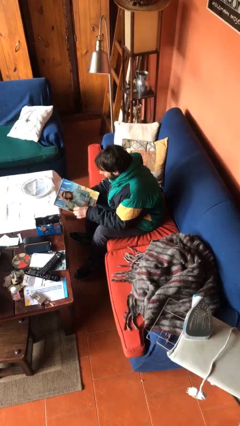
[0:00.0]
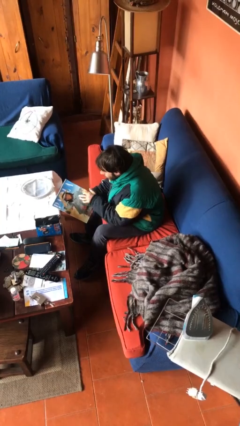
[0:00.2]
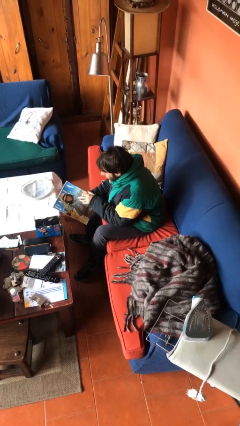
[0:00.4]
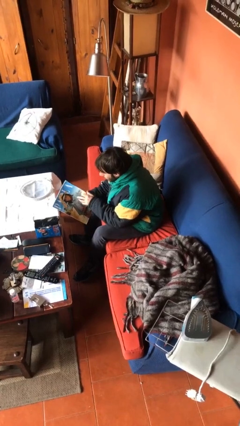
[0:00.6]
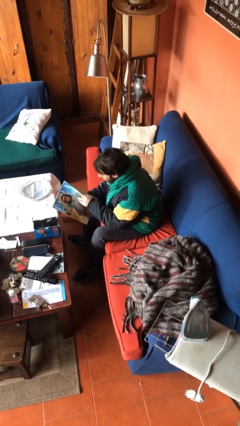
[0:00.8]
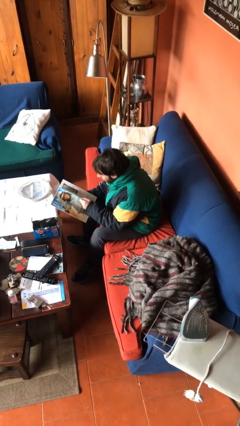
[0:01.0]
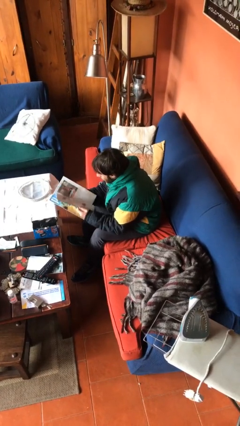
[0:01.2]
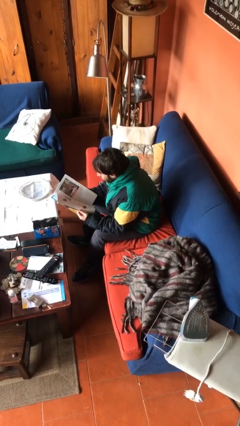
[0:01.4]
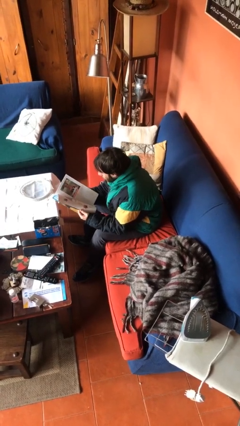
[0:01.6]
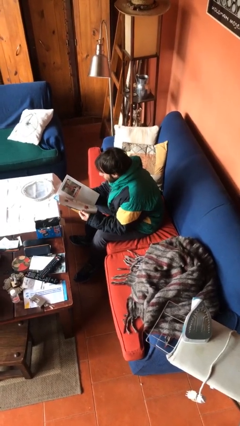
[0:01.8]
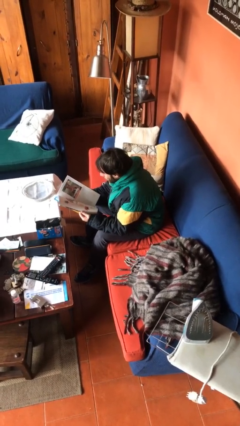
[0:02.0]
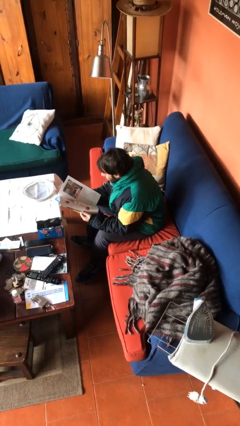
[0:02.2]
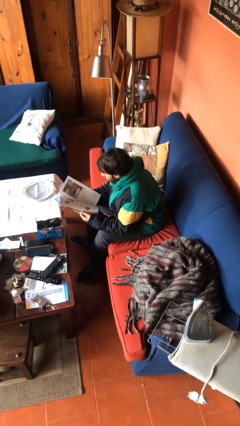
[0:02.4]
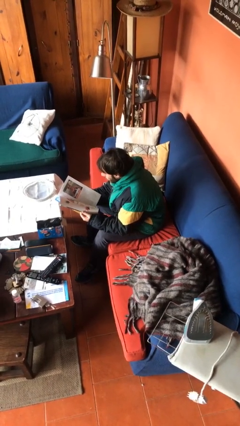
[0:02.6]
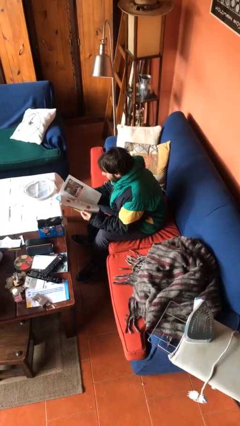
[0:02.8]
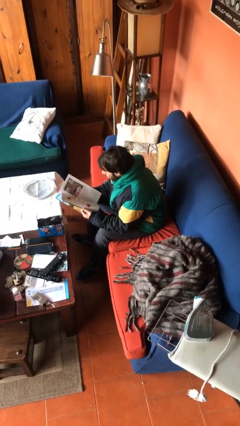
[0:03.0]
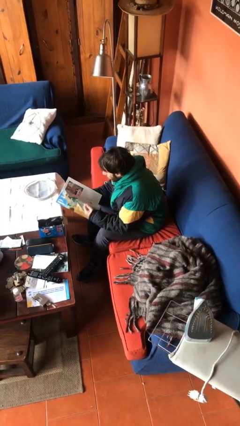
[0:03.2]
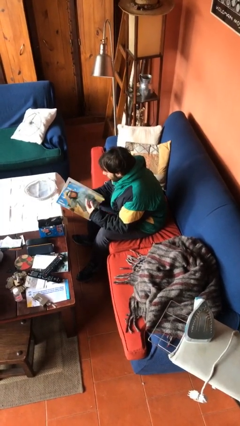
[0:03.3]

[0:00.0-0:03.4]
person reads magazine

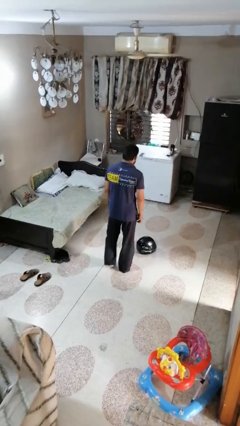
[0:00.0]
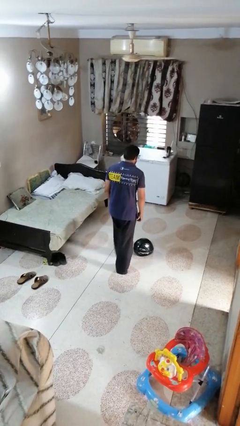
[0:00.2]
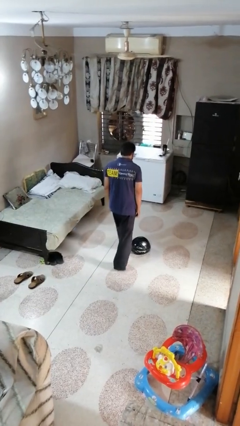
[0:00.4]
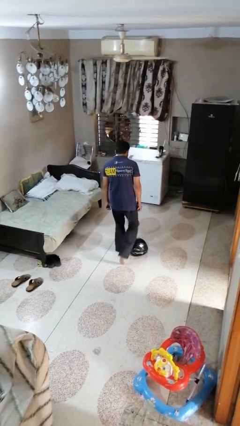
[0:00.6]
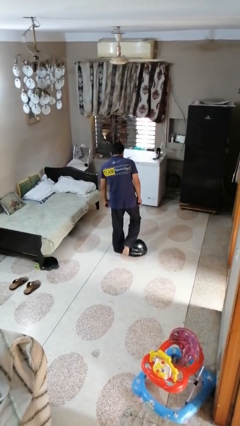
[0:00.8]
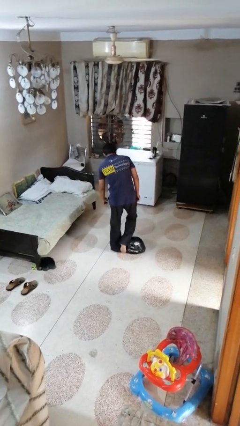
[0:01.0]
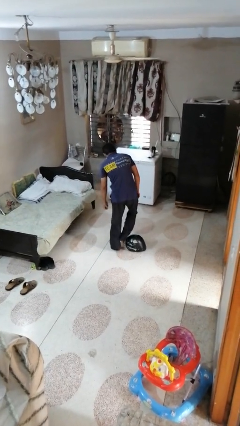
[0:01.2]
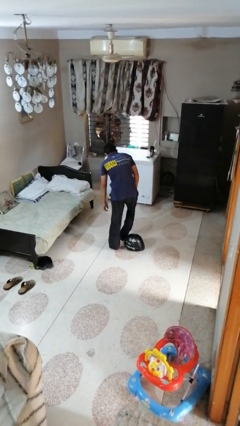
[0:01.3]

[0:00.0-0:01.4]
person trips on object on floor

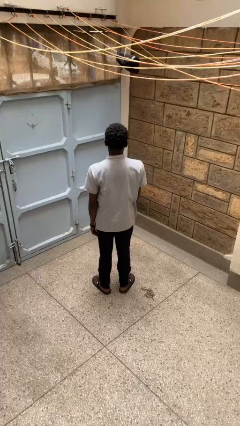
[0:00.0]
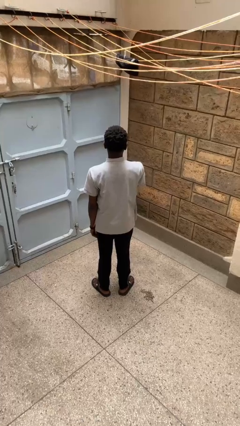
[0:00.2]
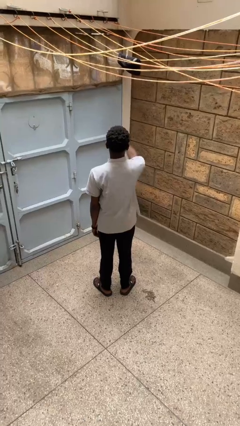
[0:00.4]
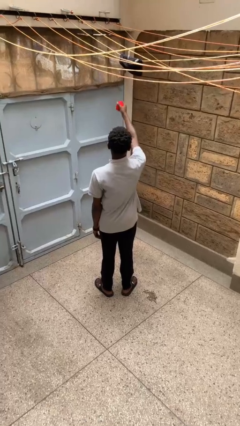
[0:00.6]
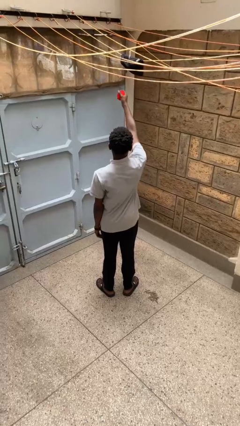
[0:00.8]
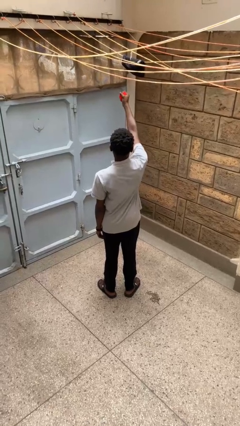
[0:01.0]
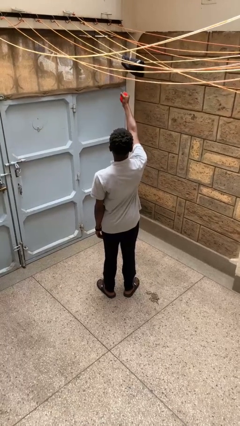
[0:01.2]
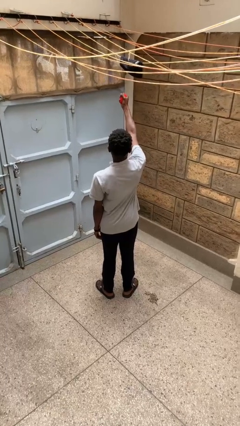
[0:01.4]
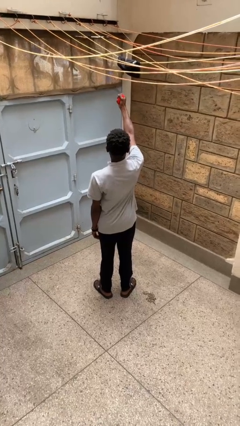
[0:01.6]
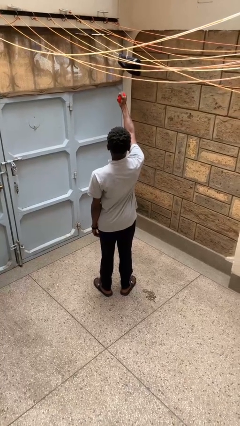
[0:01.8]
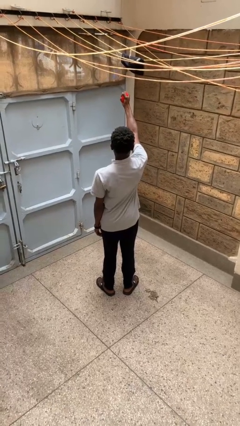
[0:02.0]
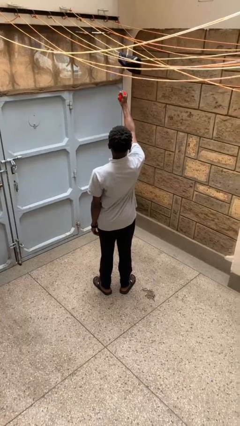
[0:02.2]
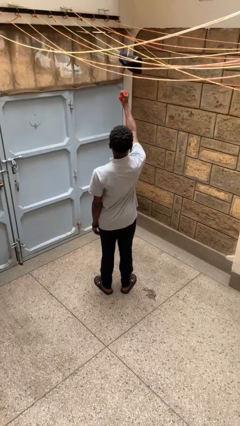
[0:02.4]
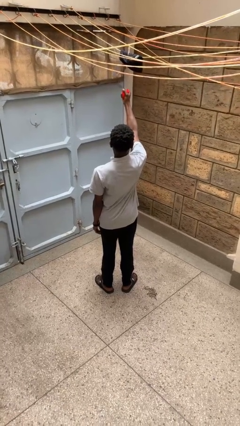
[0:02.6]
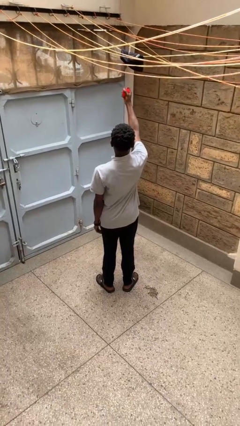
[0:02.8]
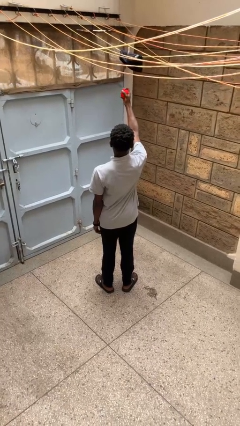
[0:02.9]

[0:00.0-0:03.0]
person squeezes object

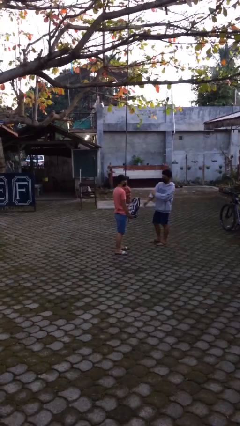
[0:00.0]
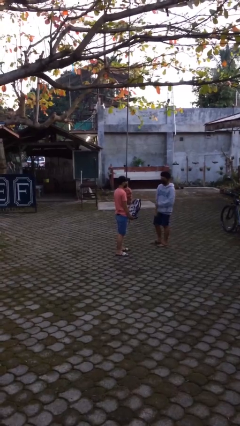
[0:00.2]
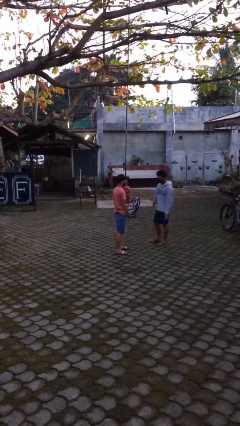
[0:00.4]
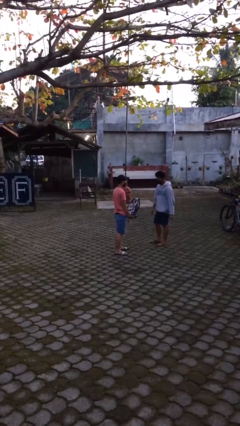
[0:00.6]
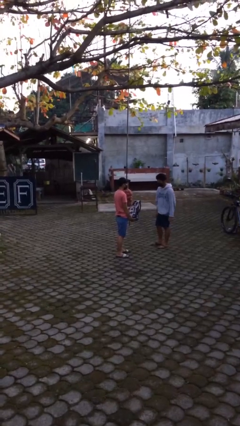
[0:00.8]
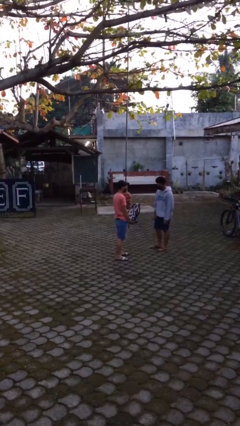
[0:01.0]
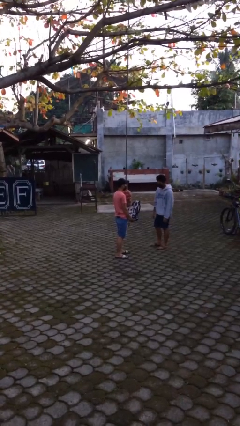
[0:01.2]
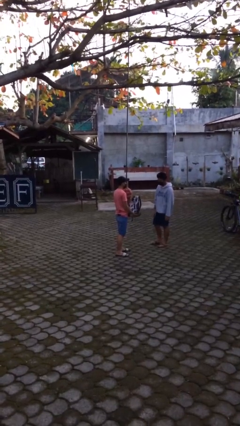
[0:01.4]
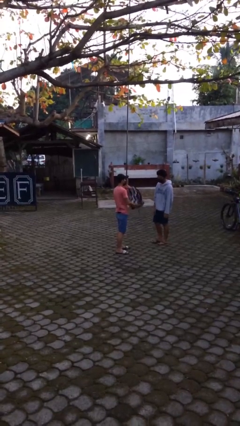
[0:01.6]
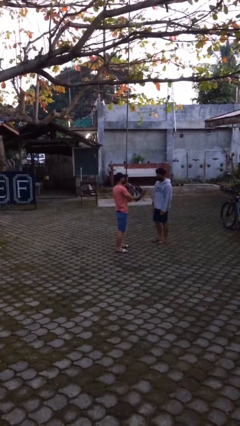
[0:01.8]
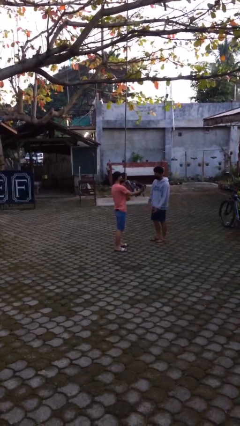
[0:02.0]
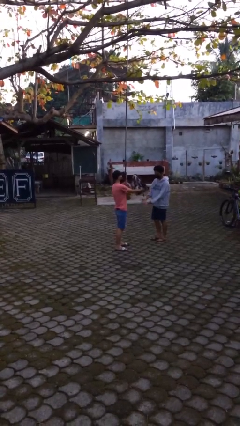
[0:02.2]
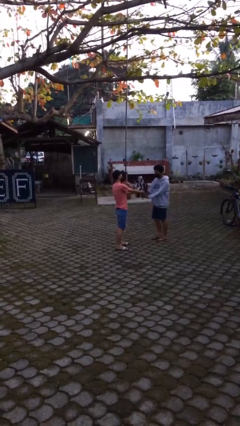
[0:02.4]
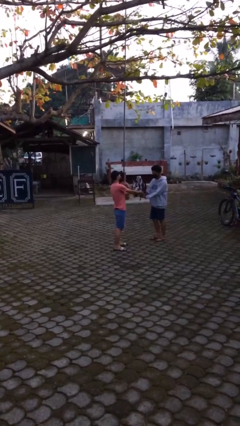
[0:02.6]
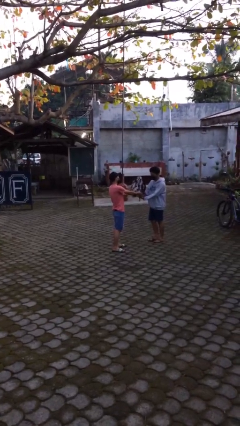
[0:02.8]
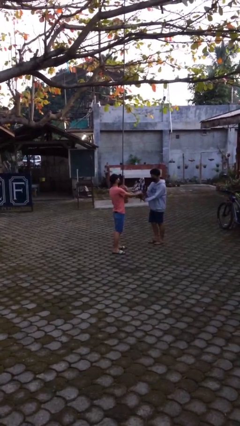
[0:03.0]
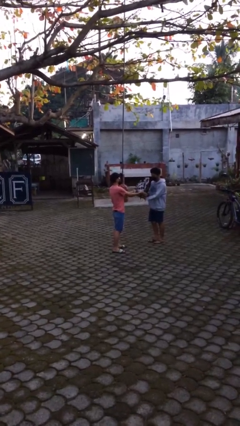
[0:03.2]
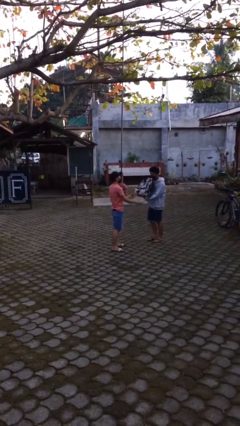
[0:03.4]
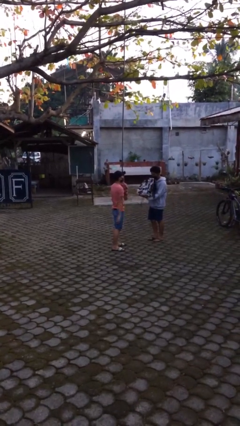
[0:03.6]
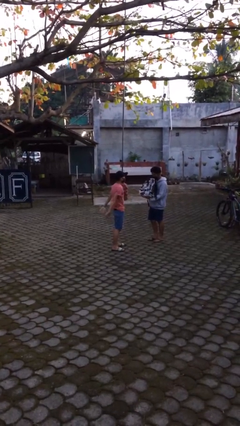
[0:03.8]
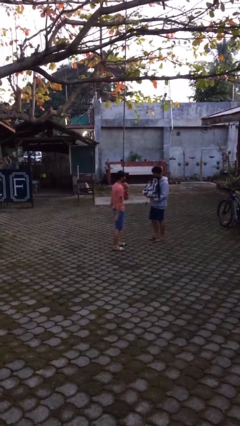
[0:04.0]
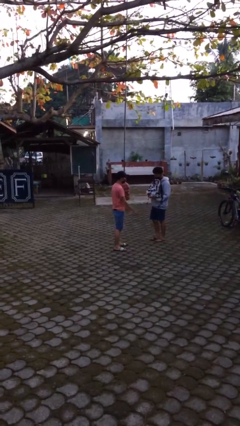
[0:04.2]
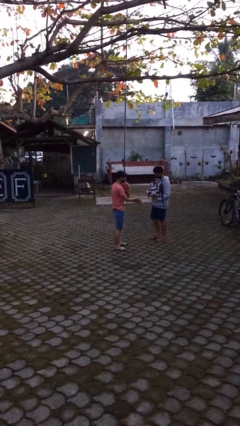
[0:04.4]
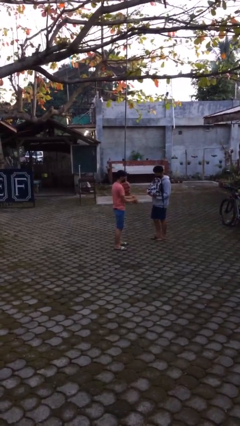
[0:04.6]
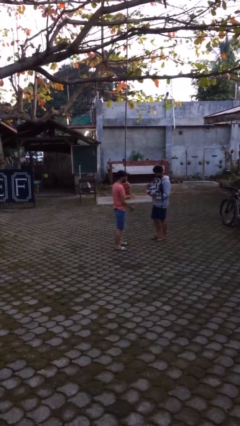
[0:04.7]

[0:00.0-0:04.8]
person transfers object to person

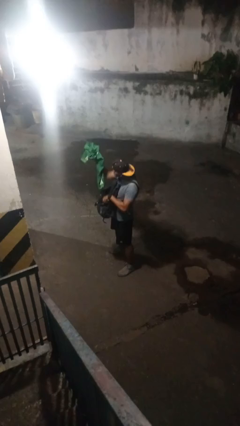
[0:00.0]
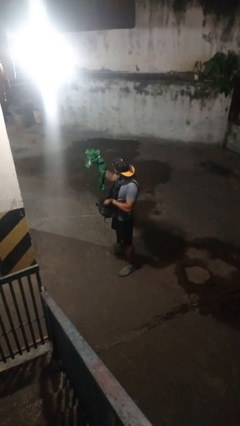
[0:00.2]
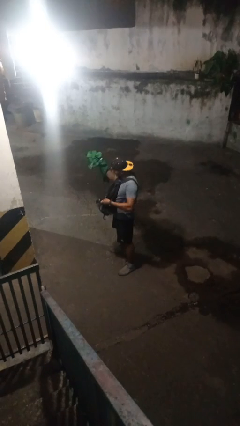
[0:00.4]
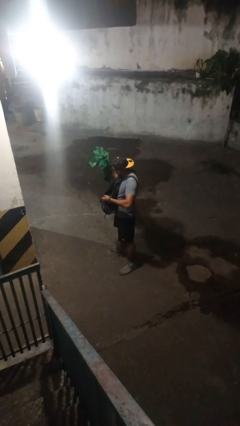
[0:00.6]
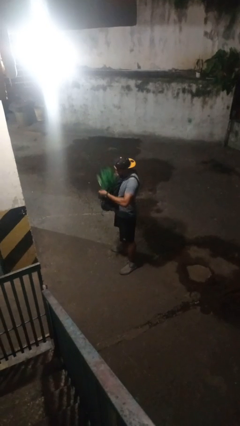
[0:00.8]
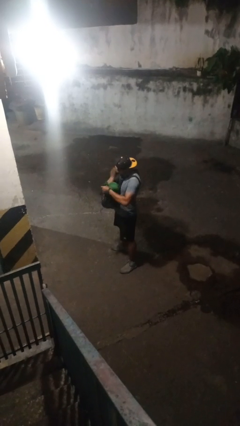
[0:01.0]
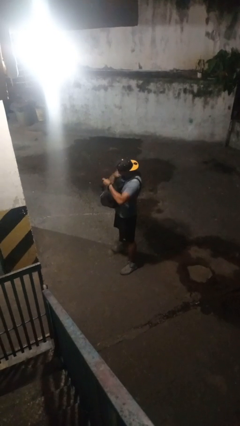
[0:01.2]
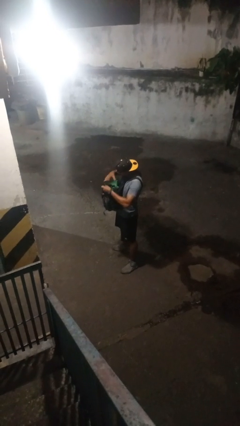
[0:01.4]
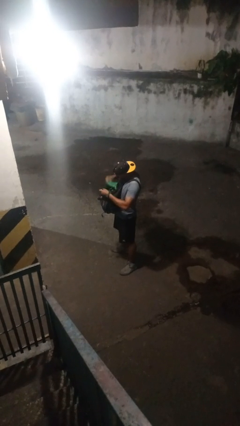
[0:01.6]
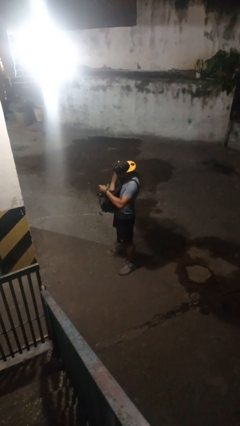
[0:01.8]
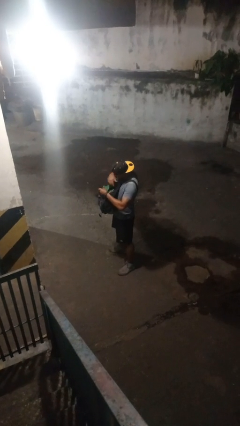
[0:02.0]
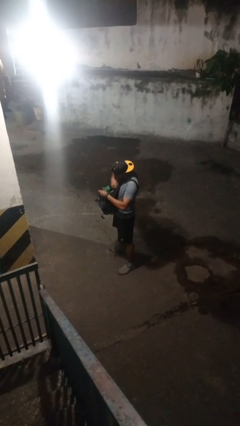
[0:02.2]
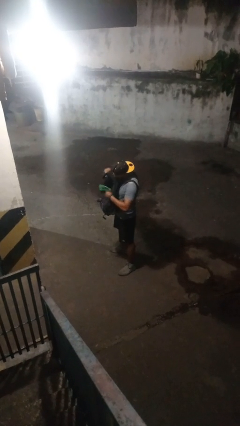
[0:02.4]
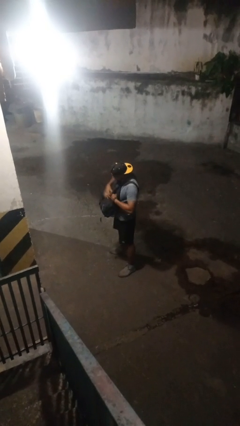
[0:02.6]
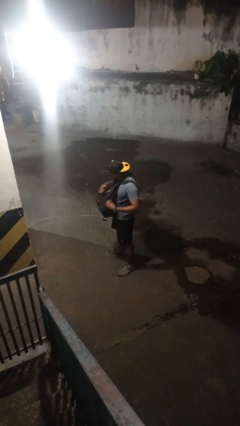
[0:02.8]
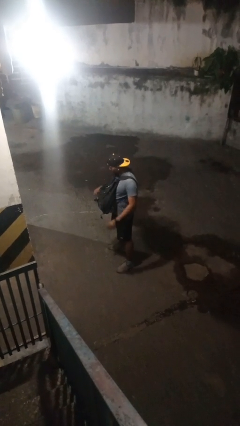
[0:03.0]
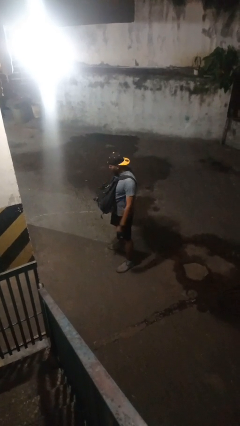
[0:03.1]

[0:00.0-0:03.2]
person puts object into backpack

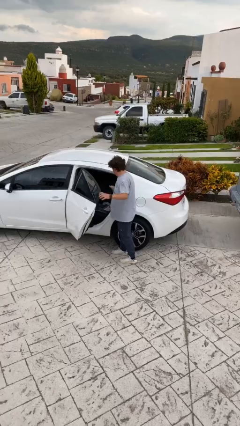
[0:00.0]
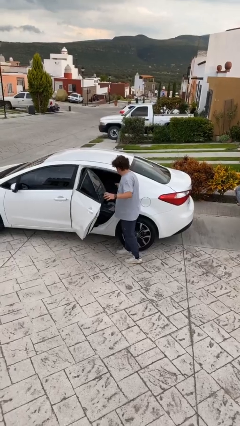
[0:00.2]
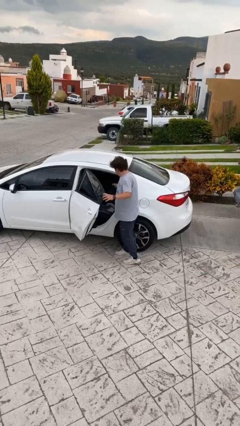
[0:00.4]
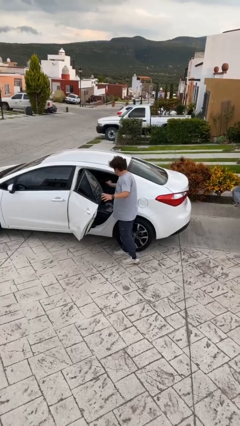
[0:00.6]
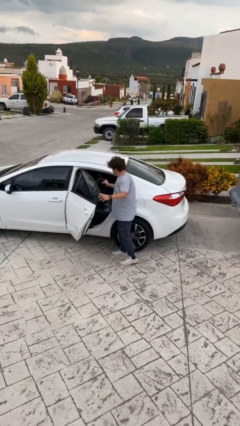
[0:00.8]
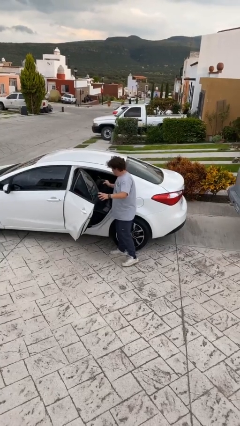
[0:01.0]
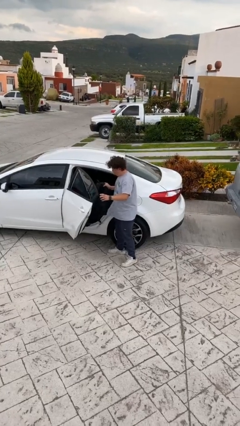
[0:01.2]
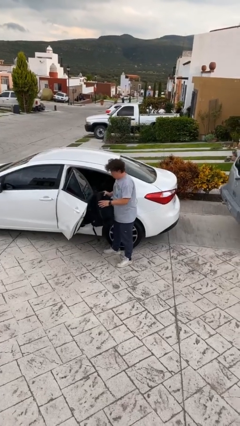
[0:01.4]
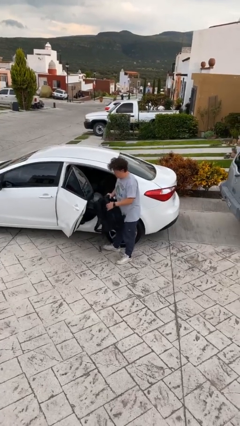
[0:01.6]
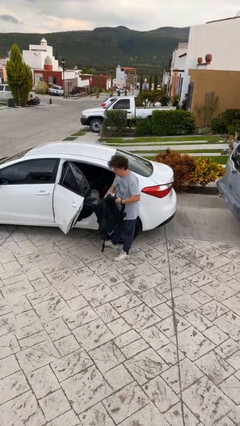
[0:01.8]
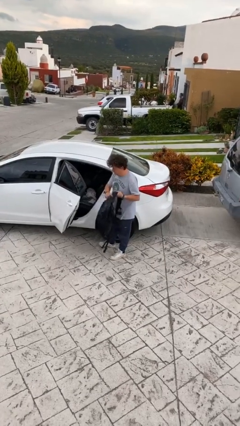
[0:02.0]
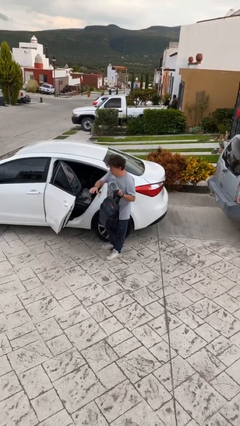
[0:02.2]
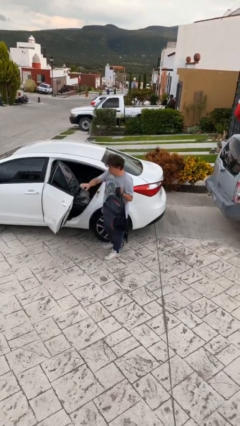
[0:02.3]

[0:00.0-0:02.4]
person unloads car
